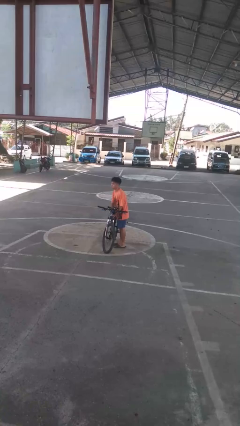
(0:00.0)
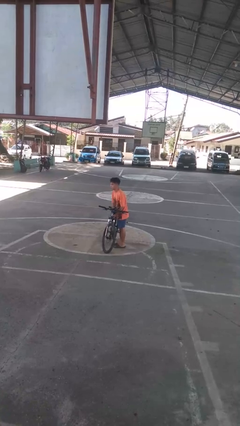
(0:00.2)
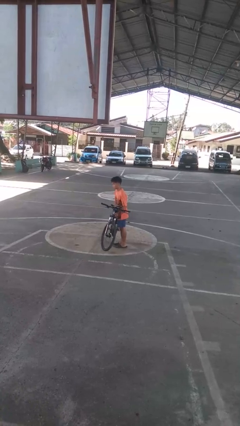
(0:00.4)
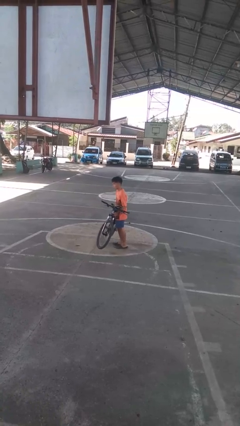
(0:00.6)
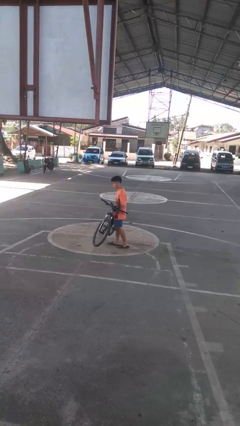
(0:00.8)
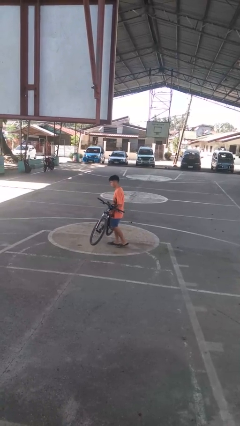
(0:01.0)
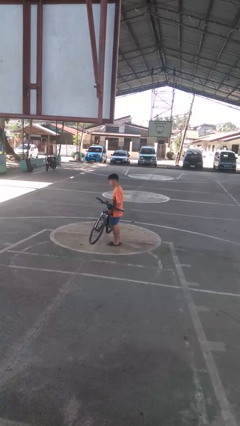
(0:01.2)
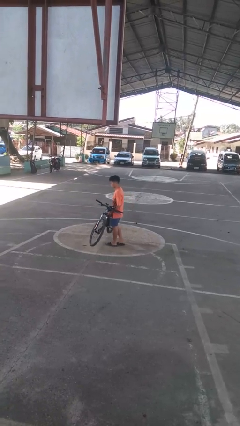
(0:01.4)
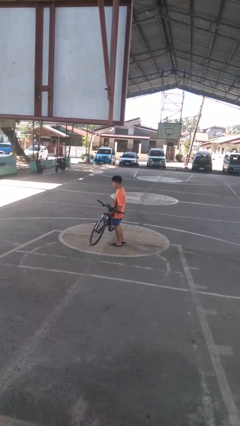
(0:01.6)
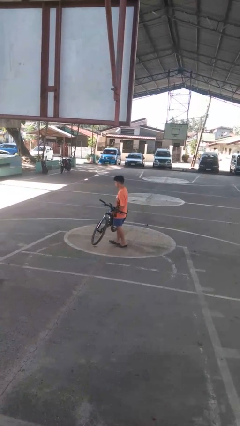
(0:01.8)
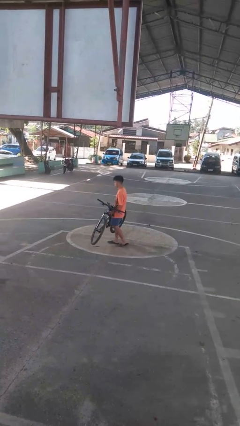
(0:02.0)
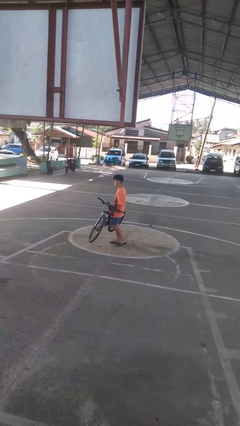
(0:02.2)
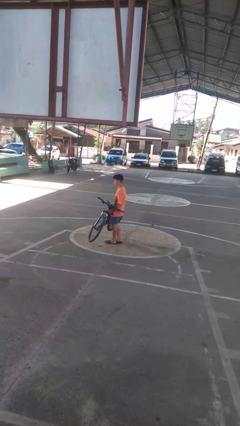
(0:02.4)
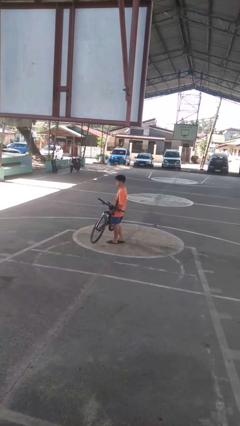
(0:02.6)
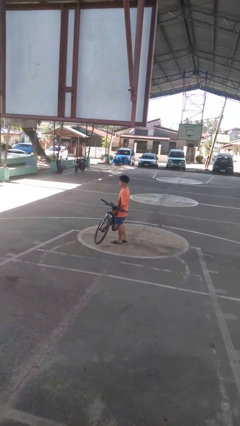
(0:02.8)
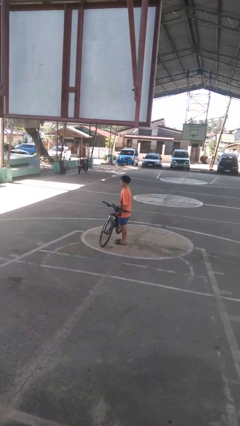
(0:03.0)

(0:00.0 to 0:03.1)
person carries bicycle

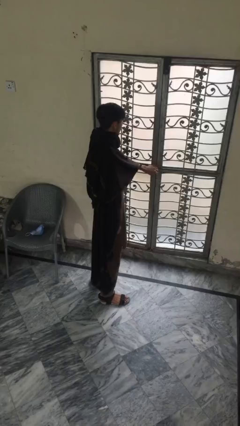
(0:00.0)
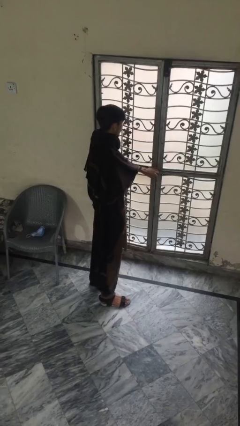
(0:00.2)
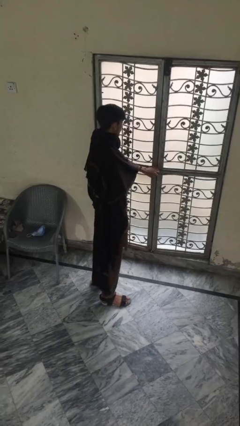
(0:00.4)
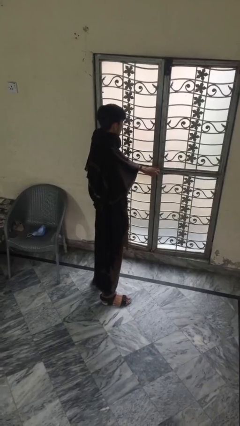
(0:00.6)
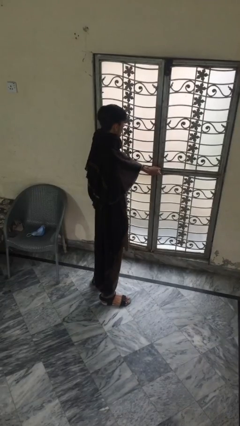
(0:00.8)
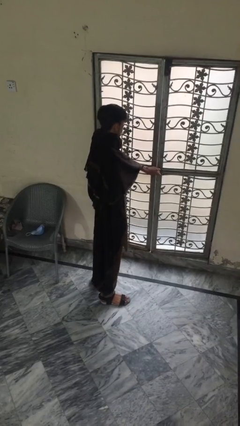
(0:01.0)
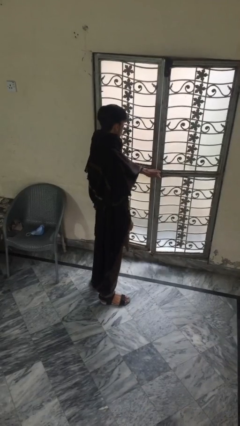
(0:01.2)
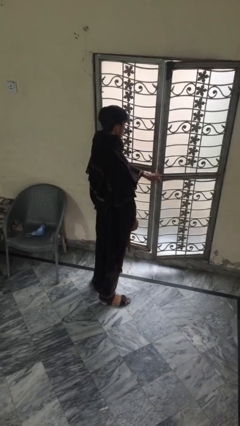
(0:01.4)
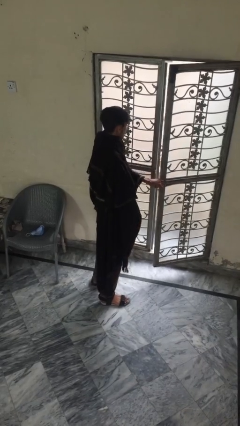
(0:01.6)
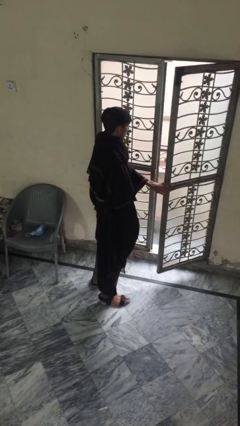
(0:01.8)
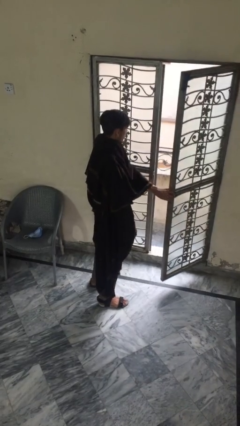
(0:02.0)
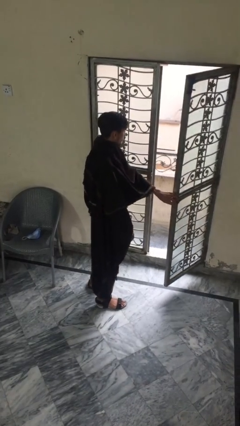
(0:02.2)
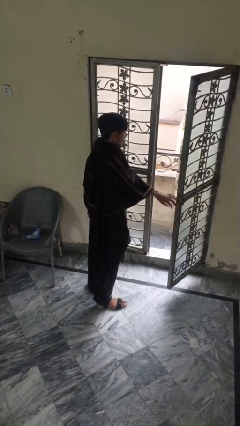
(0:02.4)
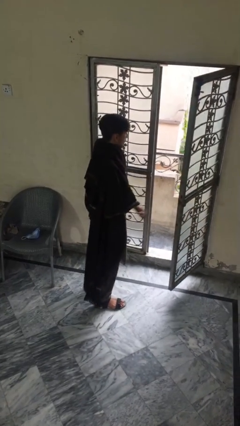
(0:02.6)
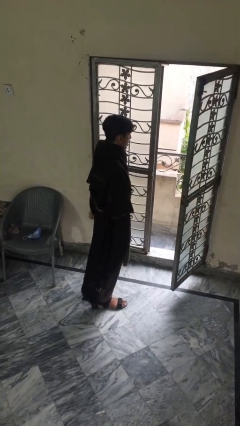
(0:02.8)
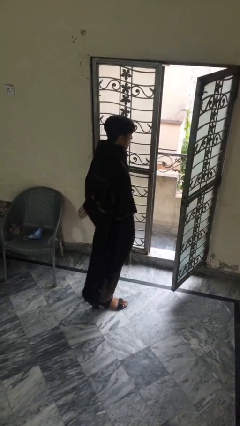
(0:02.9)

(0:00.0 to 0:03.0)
person opens facility door

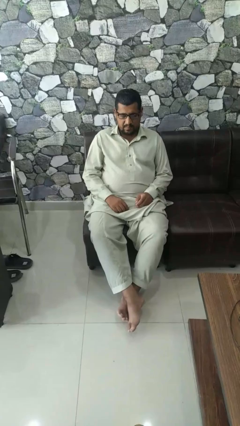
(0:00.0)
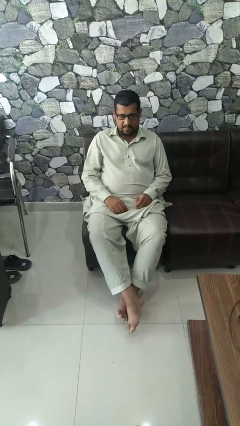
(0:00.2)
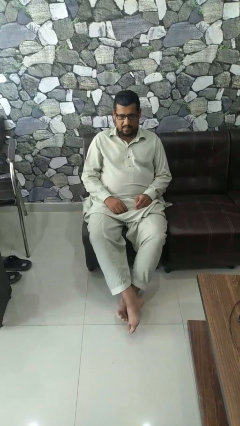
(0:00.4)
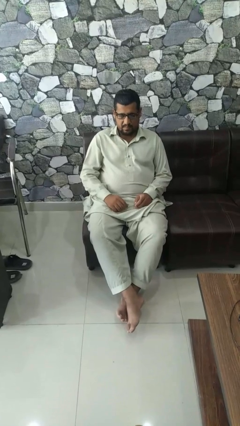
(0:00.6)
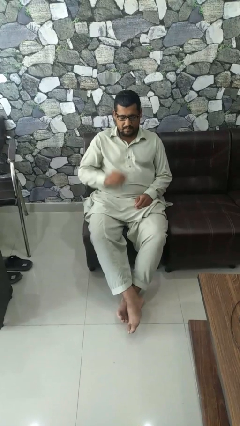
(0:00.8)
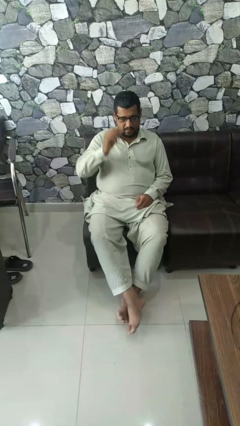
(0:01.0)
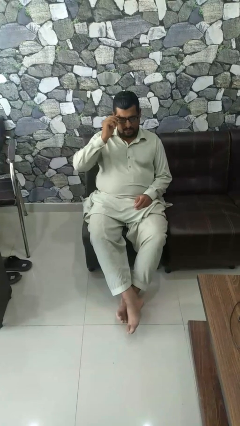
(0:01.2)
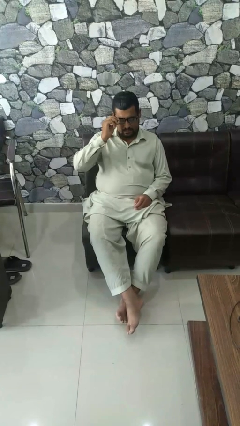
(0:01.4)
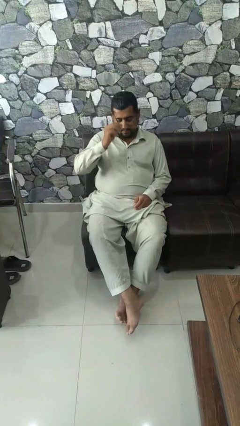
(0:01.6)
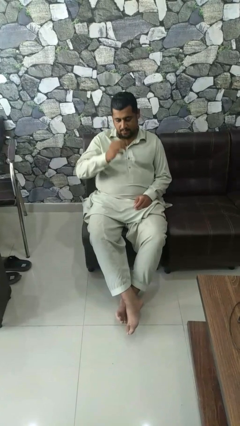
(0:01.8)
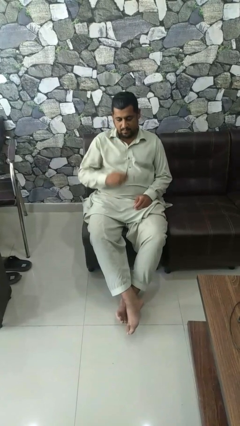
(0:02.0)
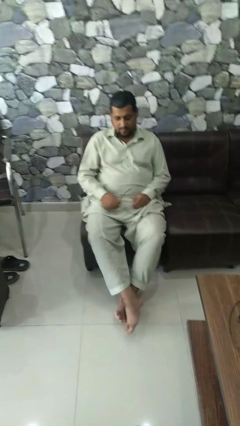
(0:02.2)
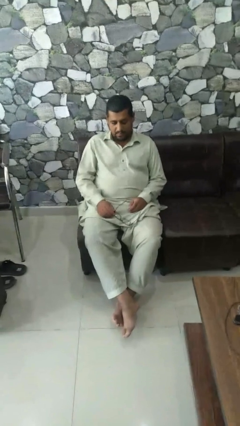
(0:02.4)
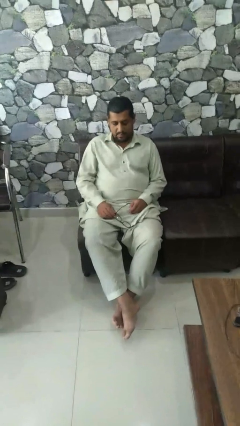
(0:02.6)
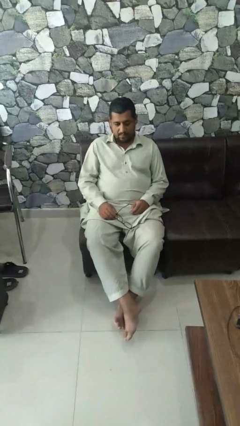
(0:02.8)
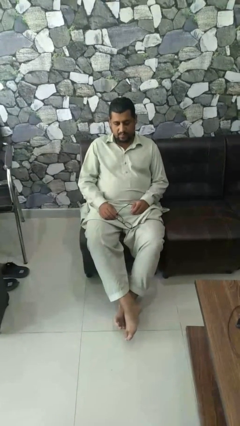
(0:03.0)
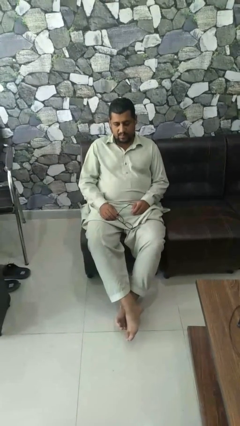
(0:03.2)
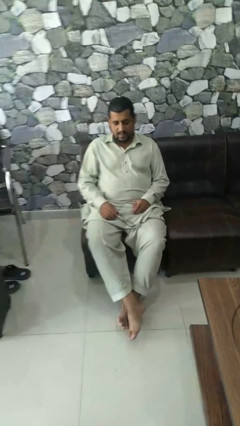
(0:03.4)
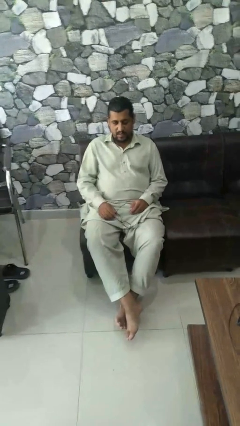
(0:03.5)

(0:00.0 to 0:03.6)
person takes off glasses

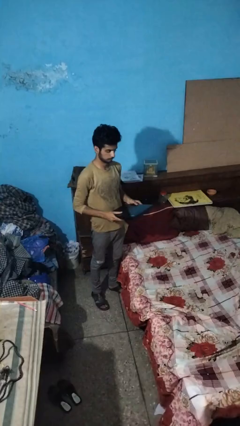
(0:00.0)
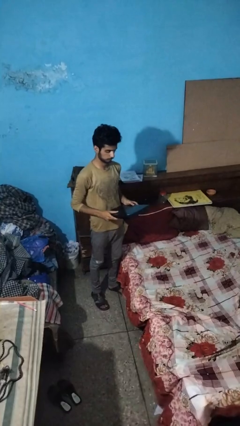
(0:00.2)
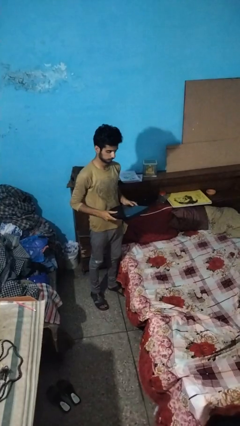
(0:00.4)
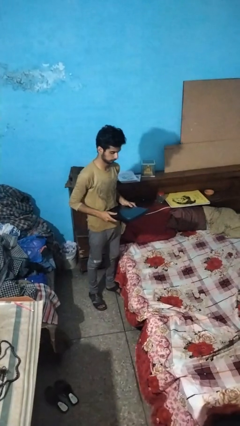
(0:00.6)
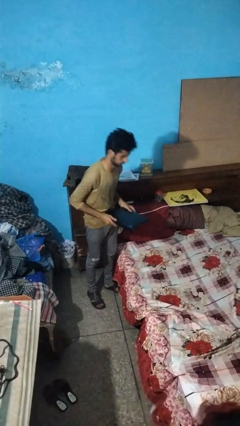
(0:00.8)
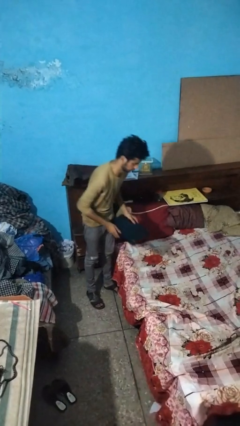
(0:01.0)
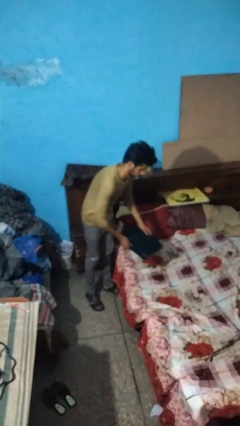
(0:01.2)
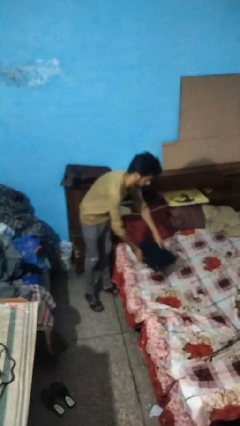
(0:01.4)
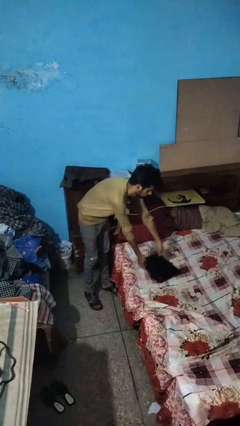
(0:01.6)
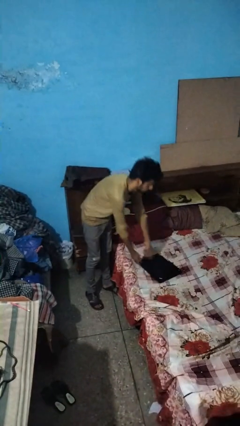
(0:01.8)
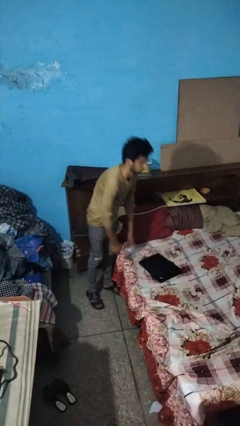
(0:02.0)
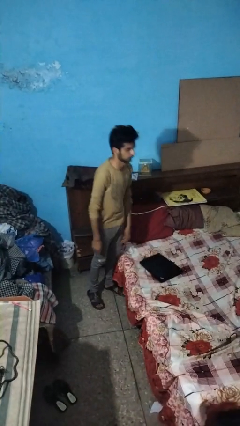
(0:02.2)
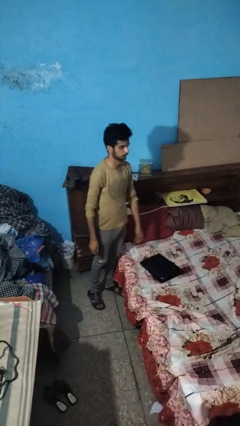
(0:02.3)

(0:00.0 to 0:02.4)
person puts down object on bed

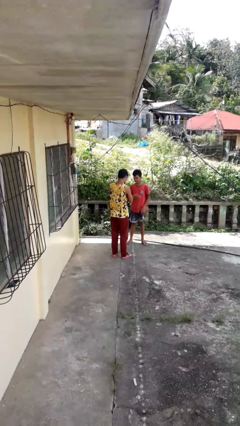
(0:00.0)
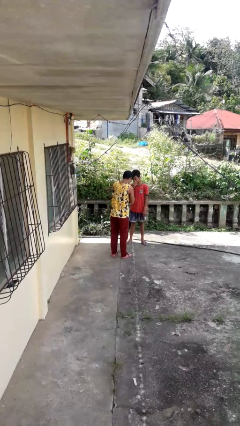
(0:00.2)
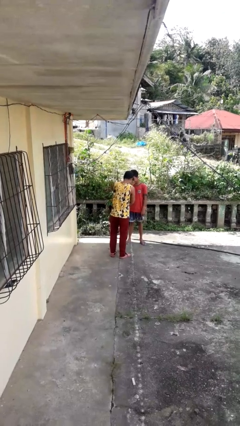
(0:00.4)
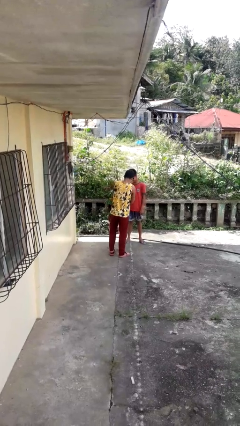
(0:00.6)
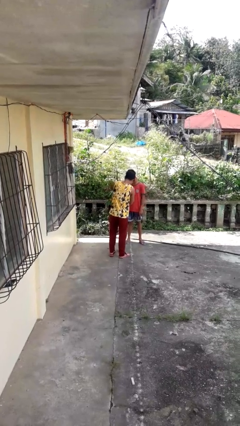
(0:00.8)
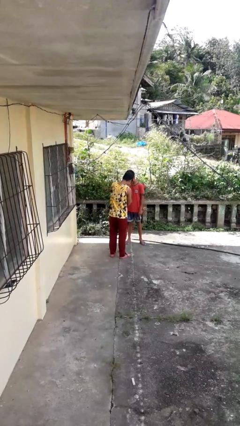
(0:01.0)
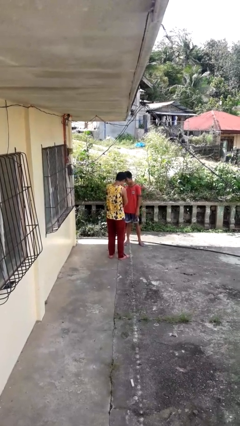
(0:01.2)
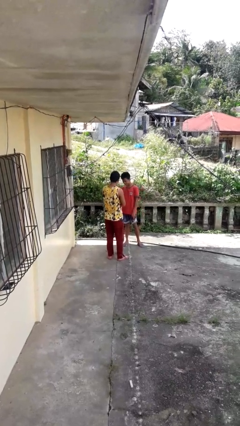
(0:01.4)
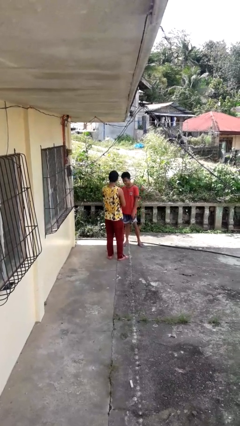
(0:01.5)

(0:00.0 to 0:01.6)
person laughs with person

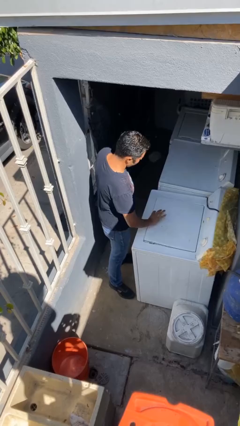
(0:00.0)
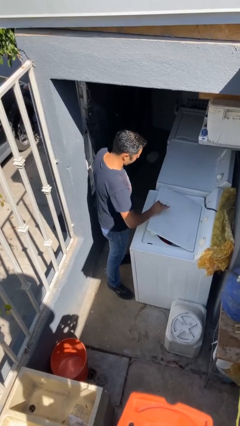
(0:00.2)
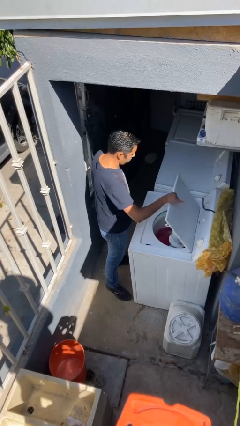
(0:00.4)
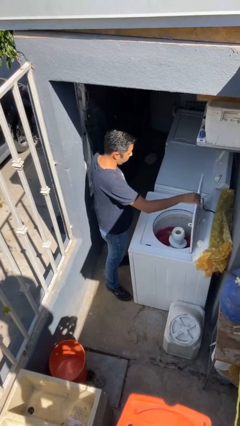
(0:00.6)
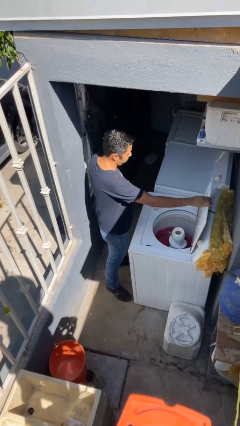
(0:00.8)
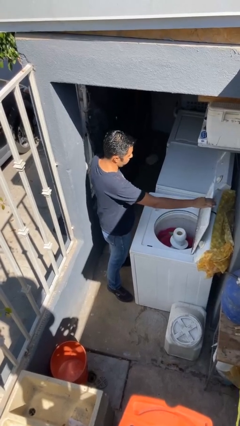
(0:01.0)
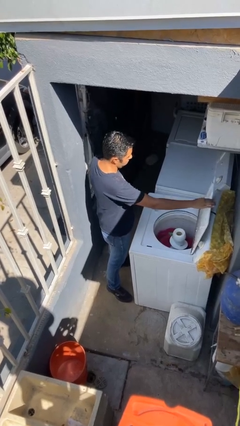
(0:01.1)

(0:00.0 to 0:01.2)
person opens clothes washer

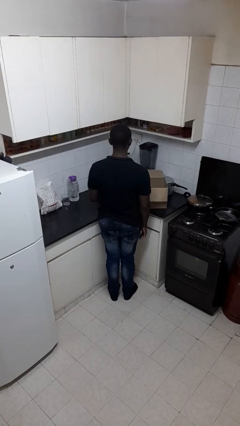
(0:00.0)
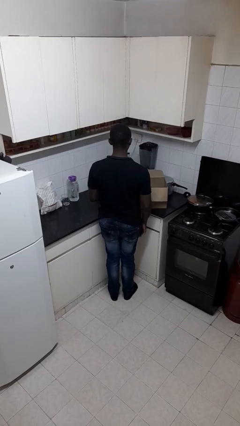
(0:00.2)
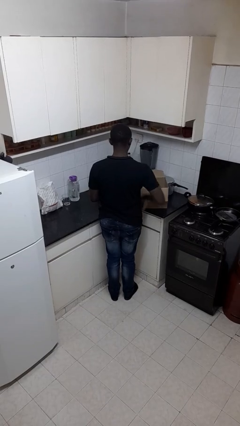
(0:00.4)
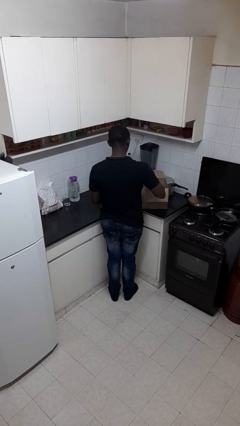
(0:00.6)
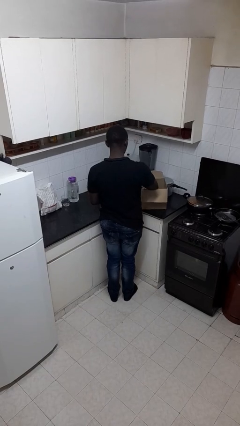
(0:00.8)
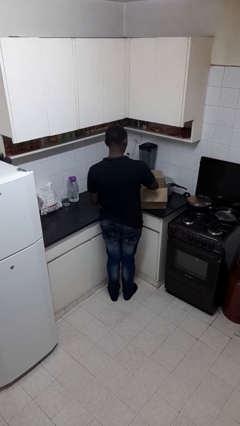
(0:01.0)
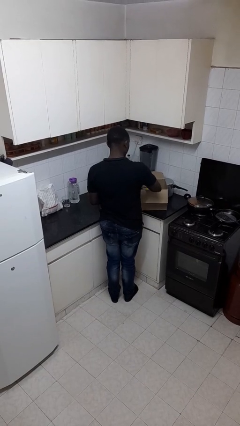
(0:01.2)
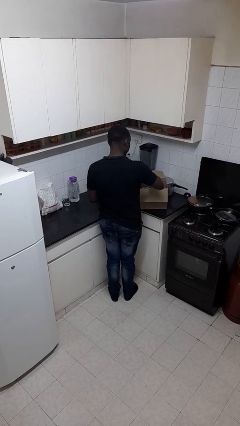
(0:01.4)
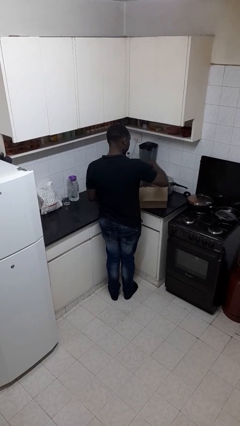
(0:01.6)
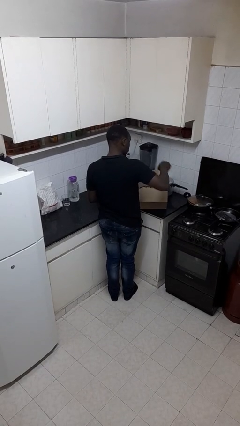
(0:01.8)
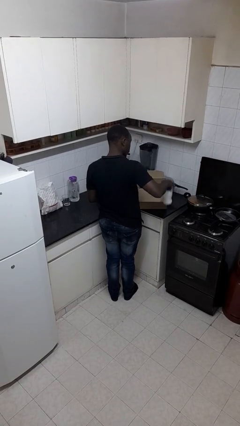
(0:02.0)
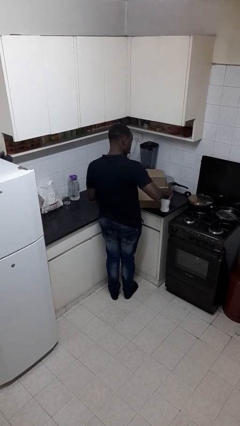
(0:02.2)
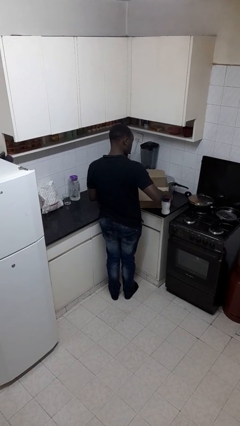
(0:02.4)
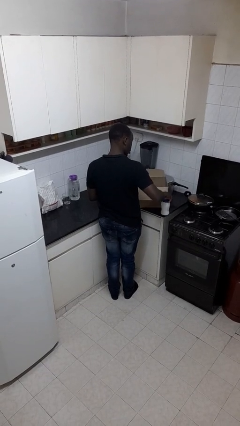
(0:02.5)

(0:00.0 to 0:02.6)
person takes object from box
